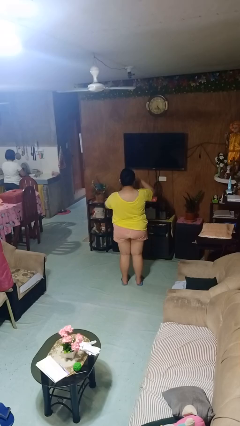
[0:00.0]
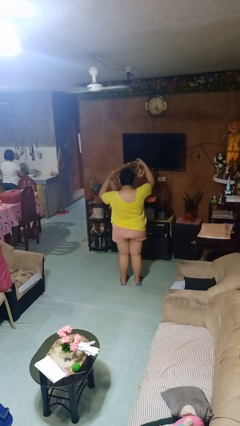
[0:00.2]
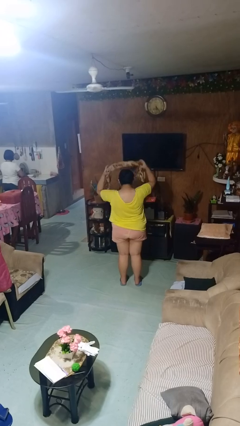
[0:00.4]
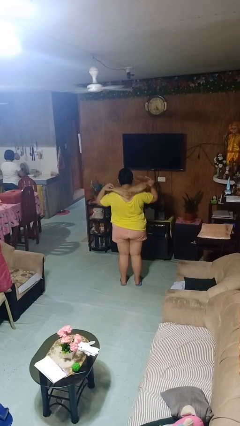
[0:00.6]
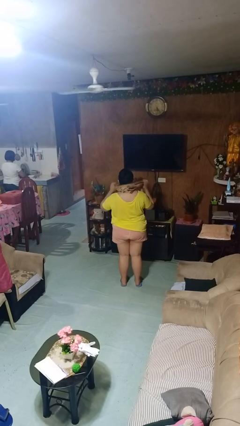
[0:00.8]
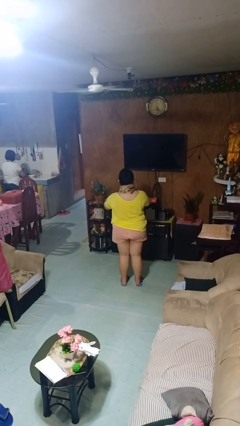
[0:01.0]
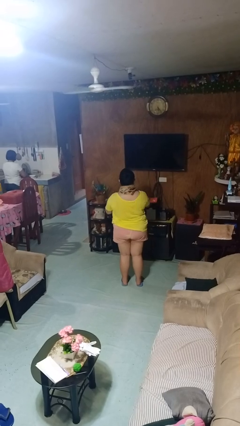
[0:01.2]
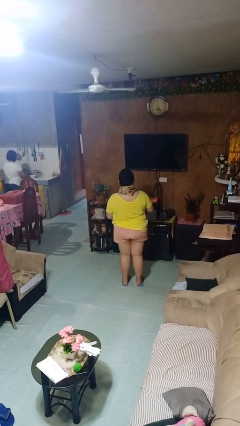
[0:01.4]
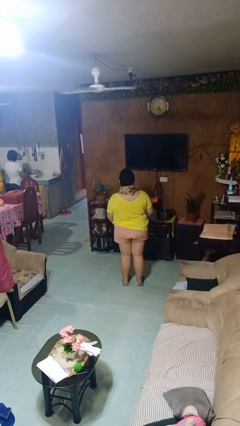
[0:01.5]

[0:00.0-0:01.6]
person puts on scarf

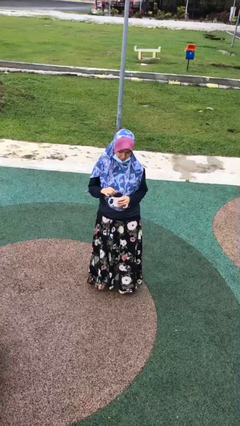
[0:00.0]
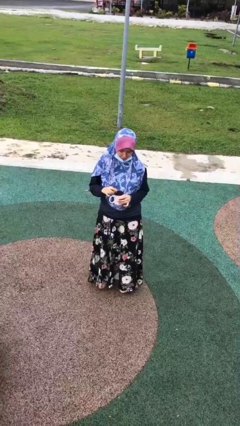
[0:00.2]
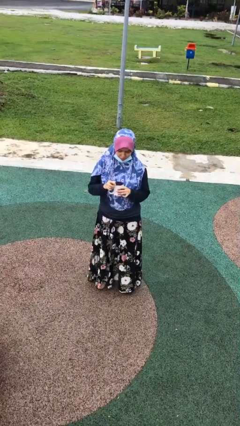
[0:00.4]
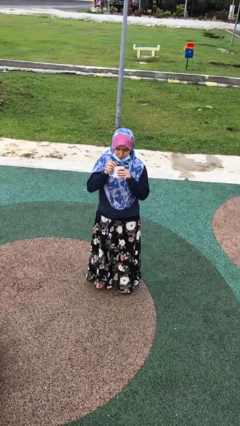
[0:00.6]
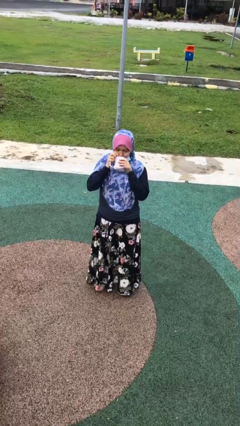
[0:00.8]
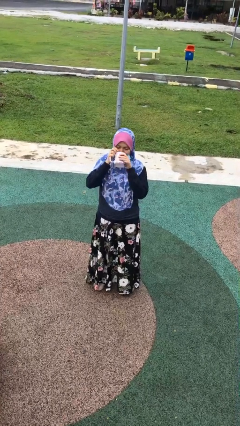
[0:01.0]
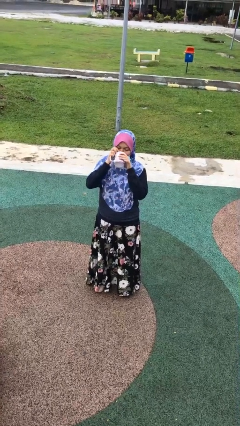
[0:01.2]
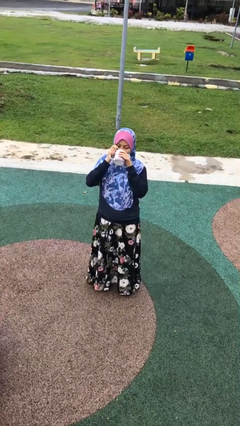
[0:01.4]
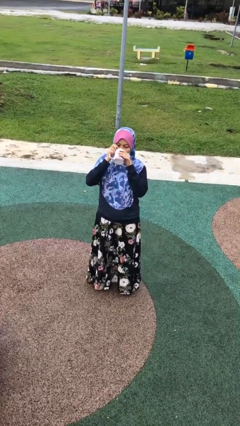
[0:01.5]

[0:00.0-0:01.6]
person drinks from mug

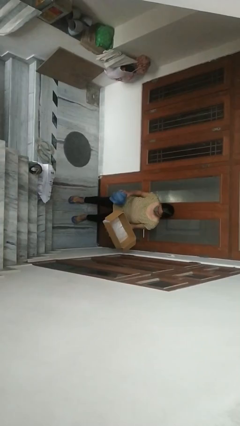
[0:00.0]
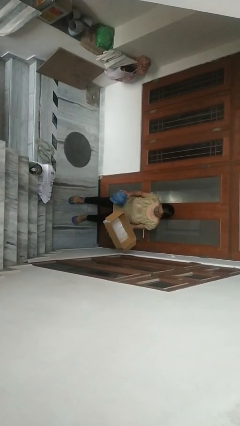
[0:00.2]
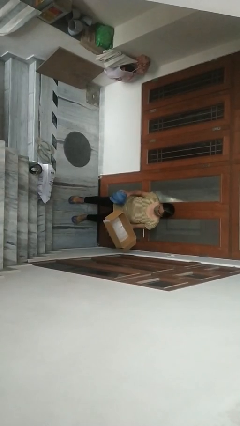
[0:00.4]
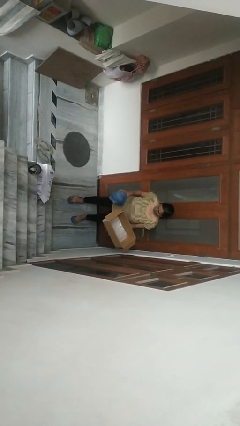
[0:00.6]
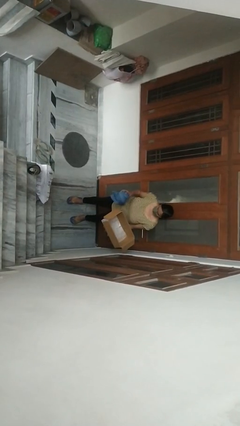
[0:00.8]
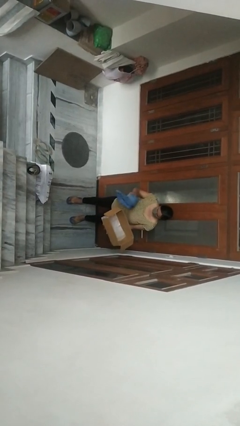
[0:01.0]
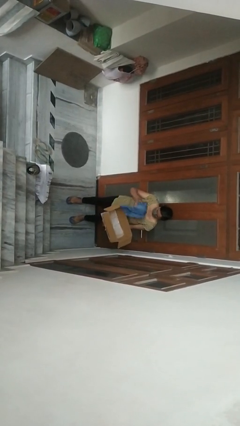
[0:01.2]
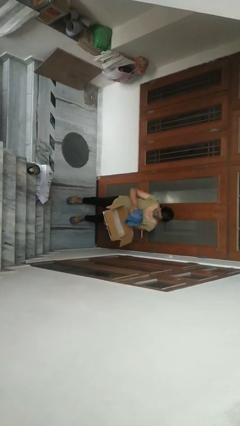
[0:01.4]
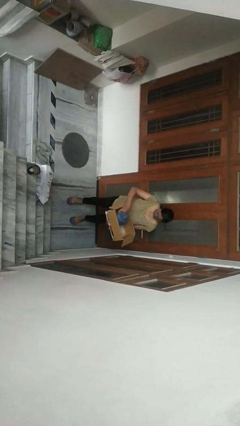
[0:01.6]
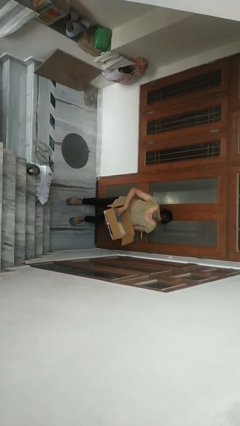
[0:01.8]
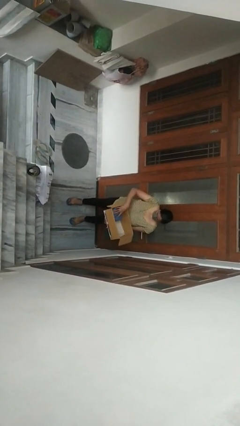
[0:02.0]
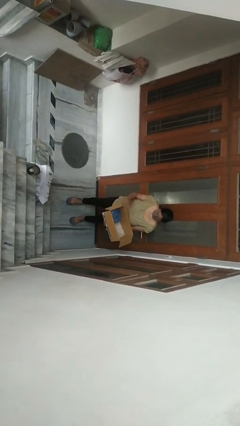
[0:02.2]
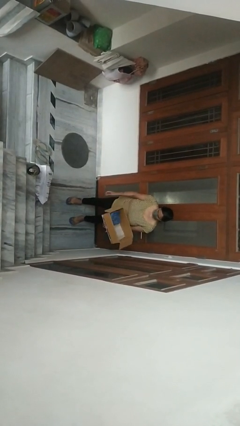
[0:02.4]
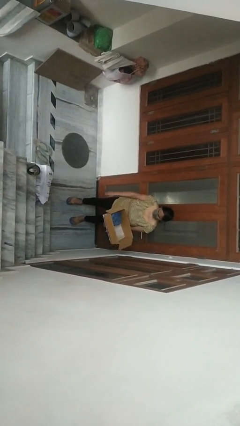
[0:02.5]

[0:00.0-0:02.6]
person puts object into box

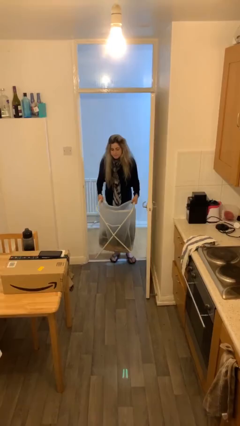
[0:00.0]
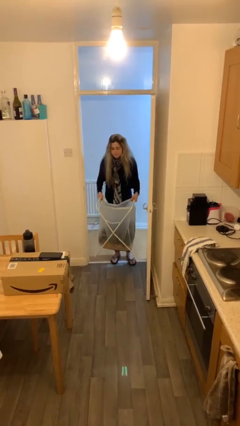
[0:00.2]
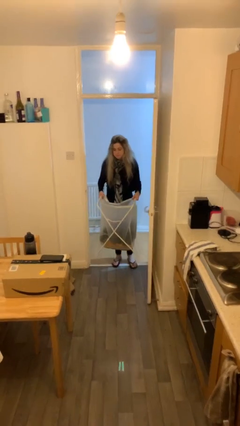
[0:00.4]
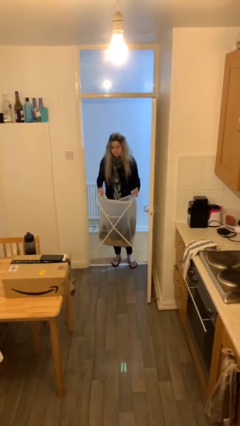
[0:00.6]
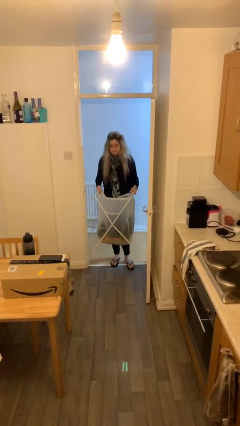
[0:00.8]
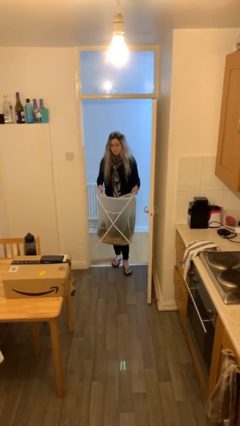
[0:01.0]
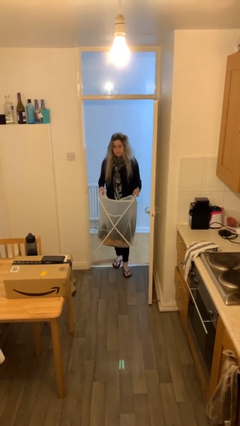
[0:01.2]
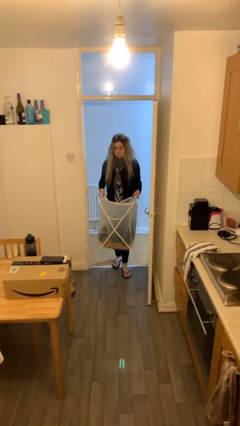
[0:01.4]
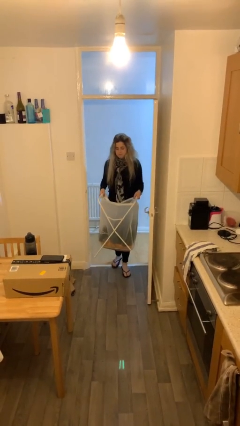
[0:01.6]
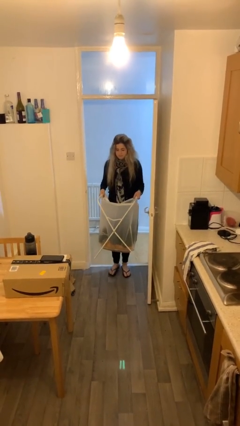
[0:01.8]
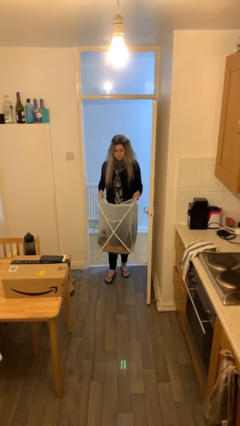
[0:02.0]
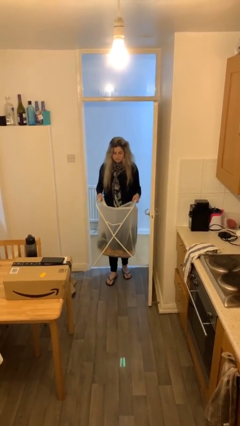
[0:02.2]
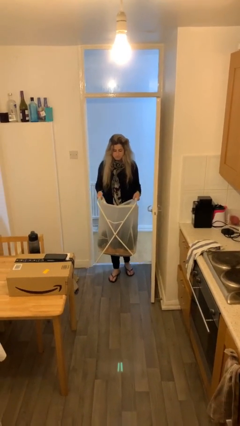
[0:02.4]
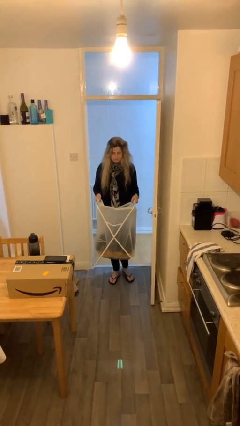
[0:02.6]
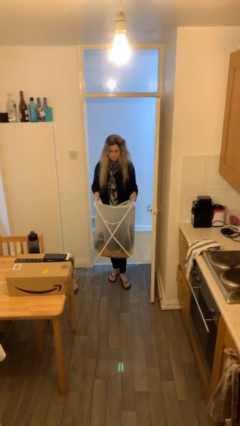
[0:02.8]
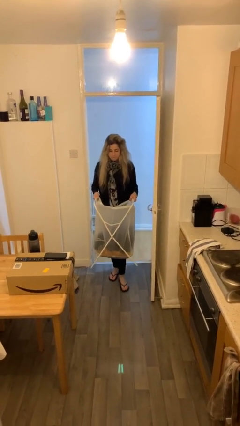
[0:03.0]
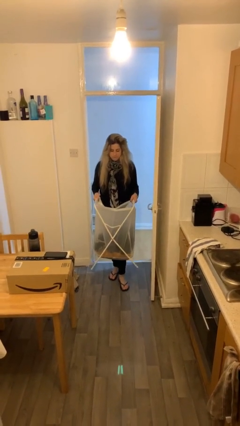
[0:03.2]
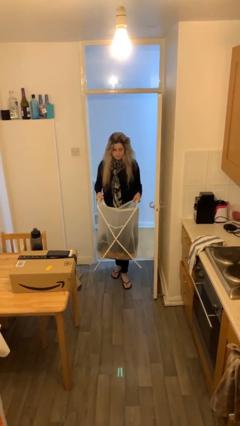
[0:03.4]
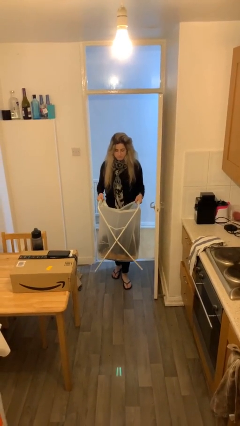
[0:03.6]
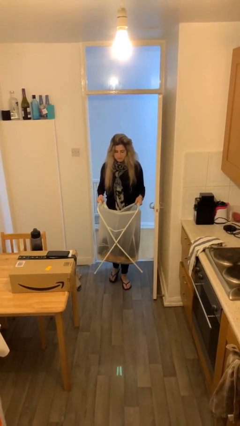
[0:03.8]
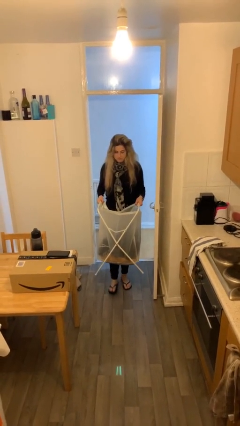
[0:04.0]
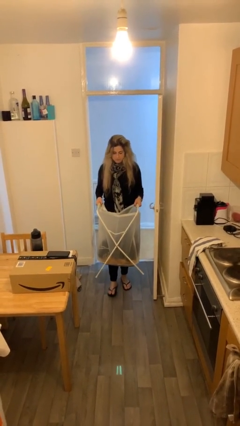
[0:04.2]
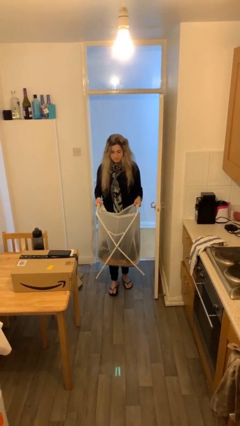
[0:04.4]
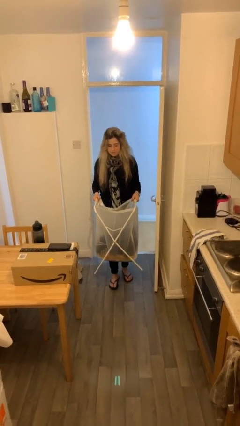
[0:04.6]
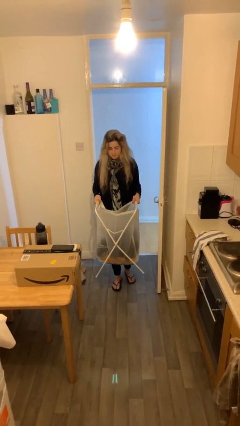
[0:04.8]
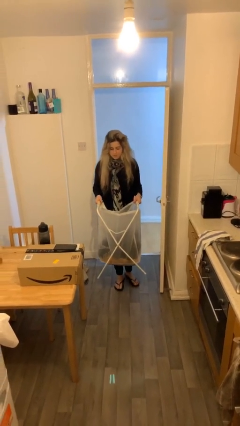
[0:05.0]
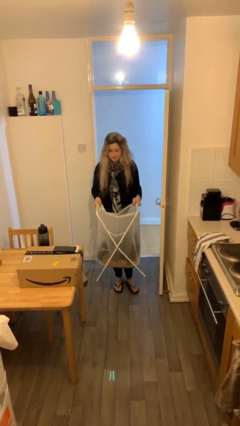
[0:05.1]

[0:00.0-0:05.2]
person carries heavy object

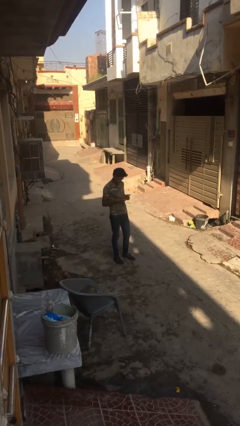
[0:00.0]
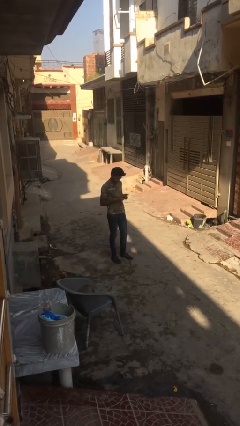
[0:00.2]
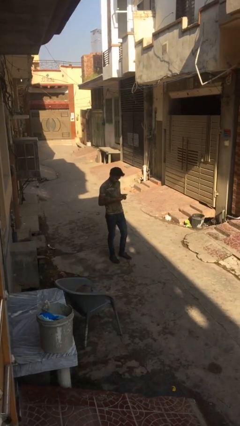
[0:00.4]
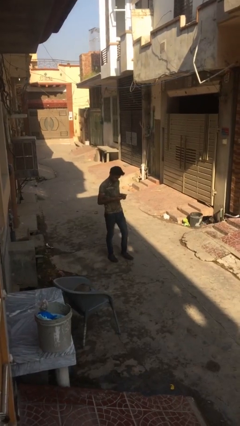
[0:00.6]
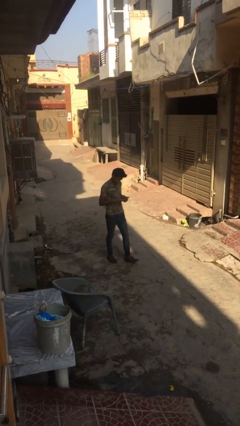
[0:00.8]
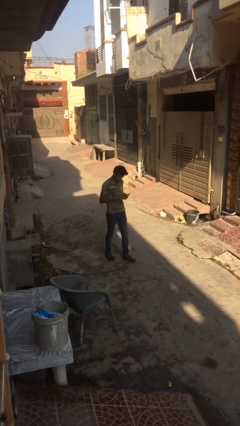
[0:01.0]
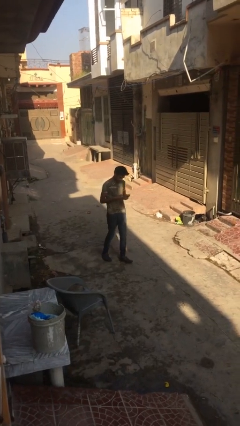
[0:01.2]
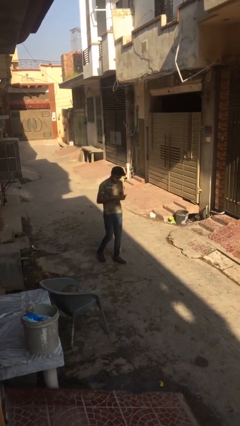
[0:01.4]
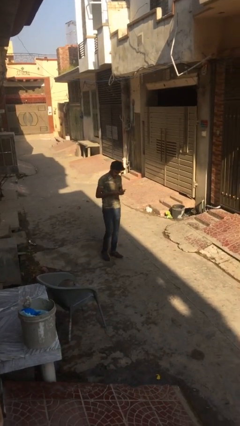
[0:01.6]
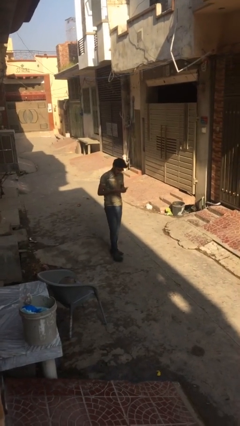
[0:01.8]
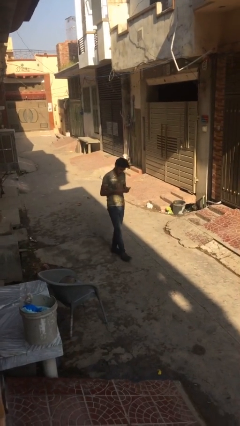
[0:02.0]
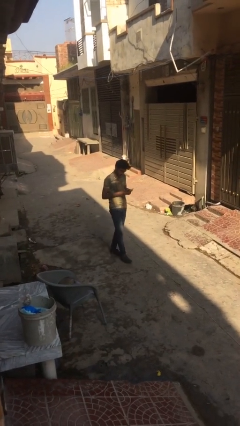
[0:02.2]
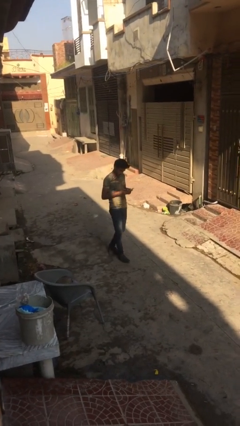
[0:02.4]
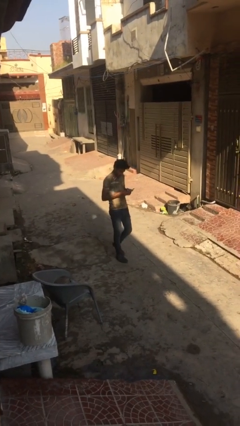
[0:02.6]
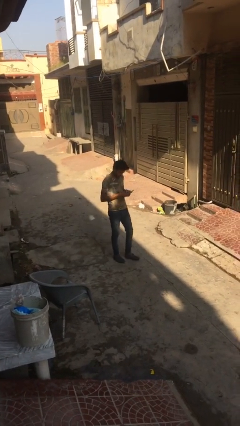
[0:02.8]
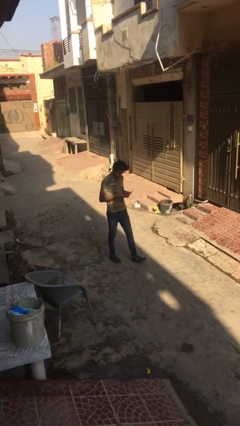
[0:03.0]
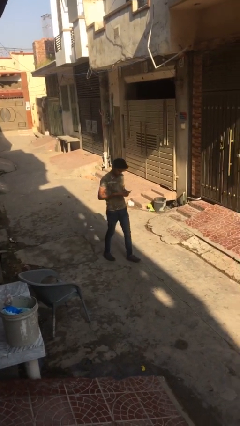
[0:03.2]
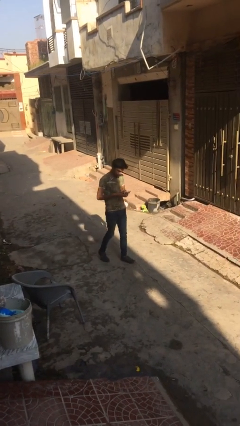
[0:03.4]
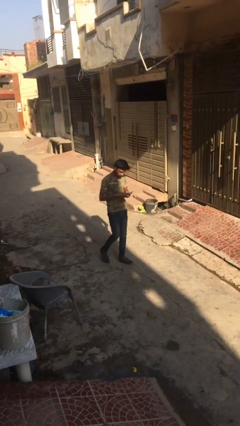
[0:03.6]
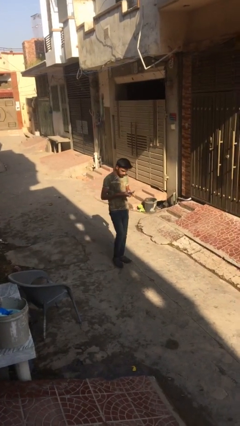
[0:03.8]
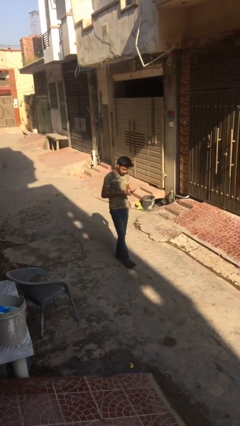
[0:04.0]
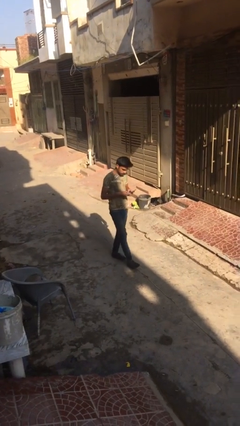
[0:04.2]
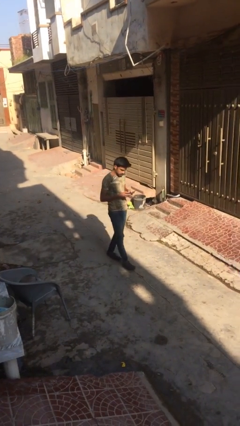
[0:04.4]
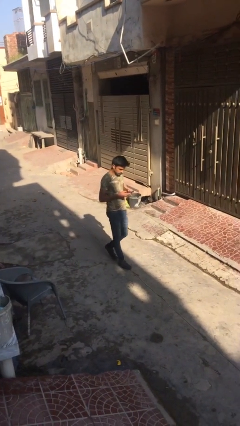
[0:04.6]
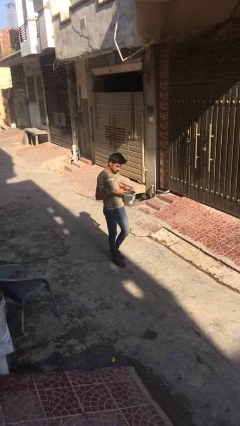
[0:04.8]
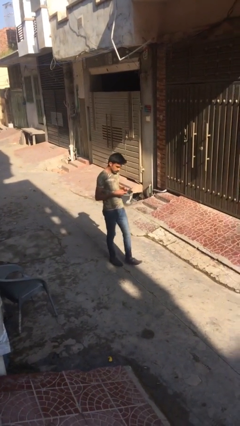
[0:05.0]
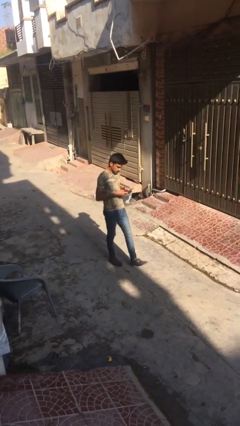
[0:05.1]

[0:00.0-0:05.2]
person texts on phone

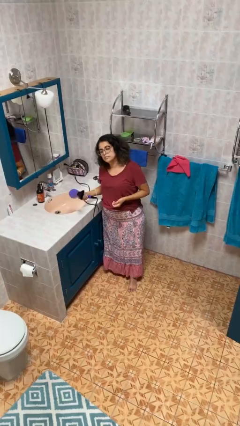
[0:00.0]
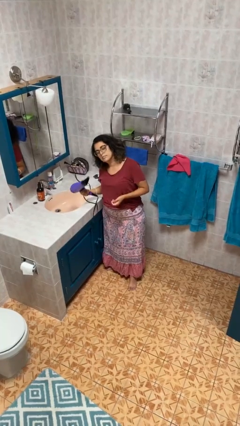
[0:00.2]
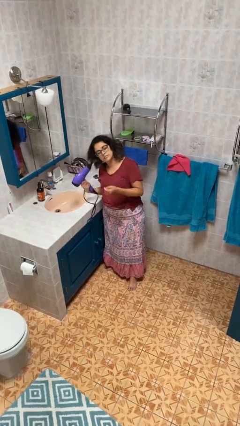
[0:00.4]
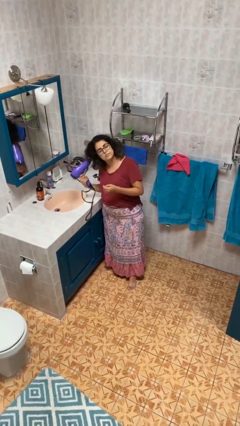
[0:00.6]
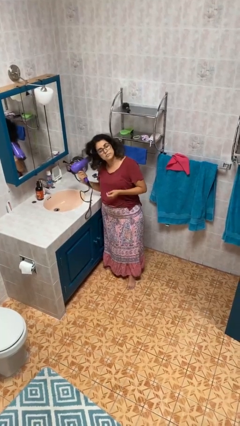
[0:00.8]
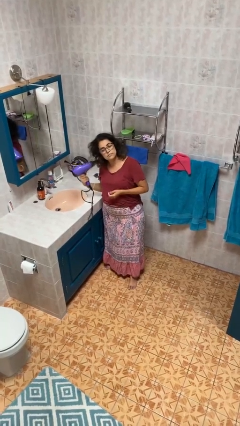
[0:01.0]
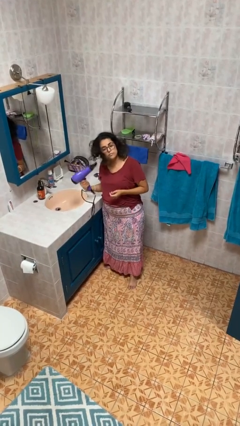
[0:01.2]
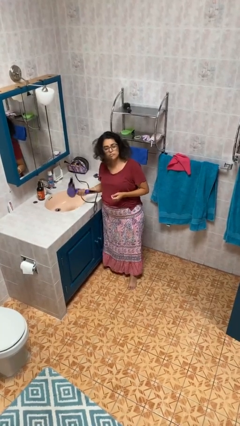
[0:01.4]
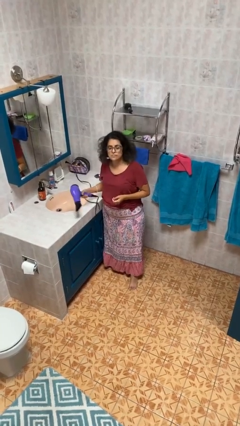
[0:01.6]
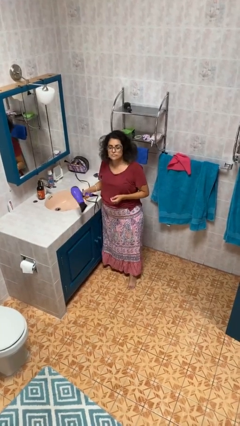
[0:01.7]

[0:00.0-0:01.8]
person dries hair with hairdryer
